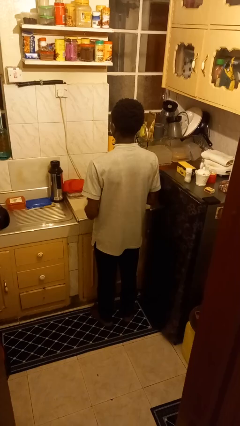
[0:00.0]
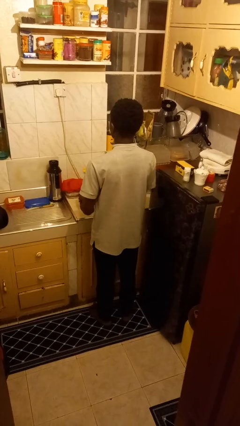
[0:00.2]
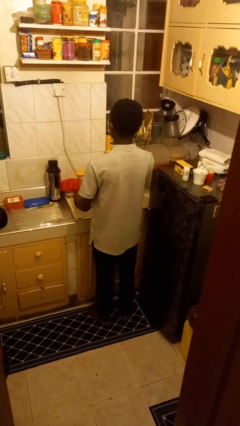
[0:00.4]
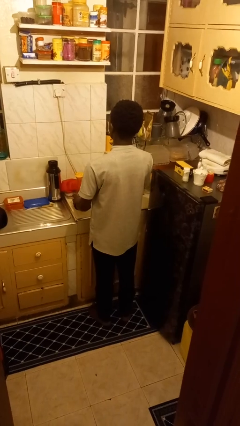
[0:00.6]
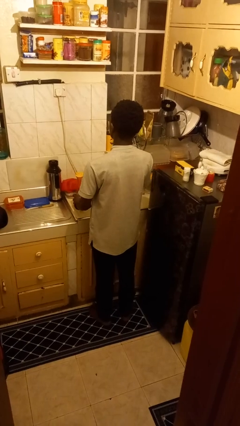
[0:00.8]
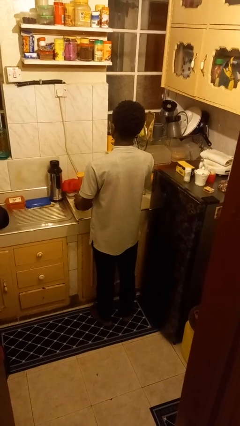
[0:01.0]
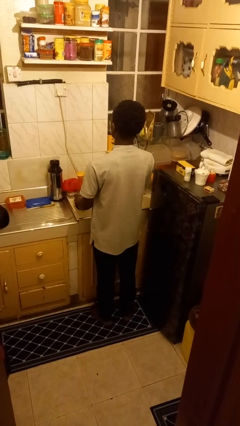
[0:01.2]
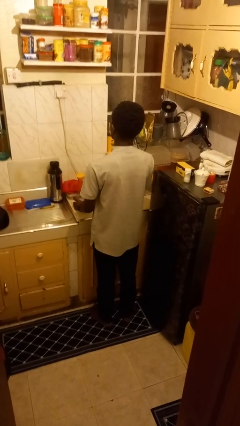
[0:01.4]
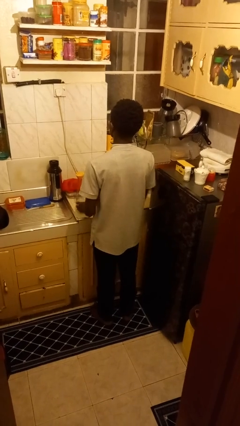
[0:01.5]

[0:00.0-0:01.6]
person puts down object on countertop

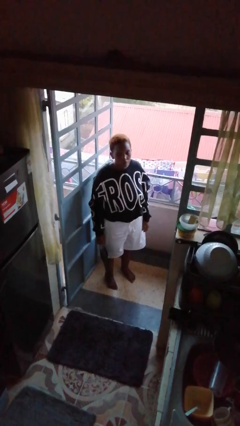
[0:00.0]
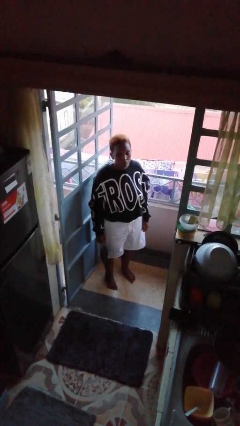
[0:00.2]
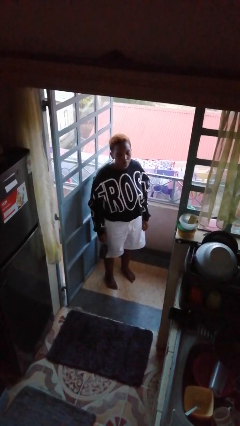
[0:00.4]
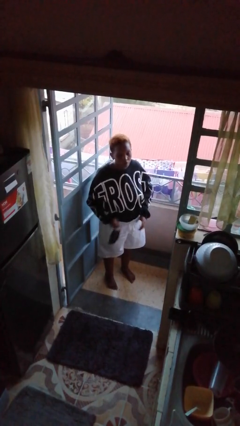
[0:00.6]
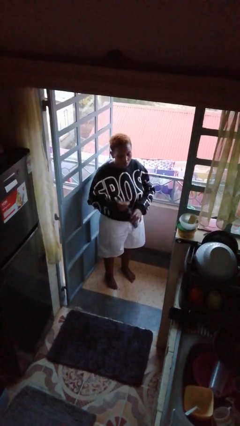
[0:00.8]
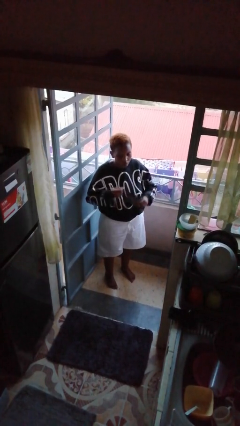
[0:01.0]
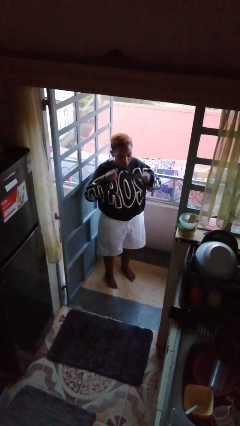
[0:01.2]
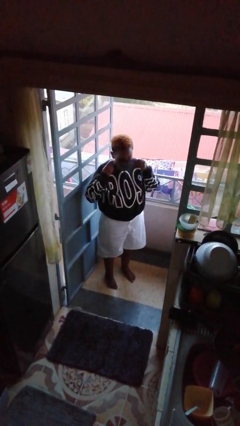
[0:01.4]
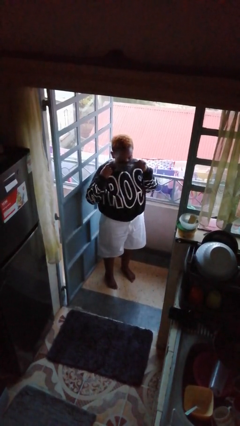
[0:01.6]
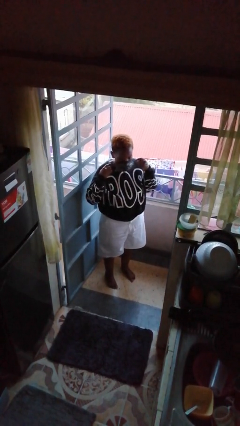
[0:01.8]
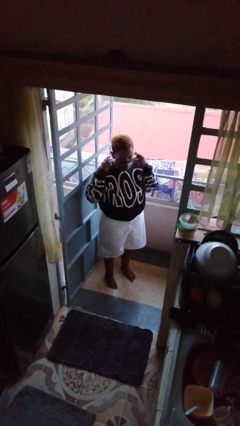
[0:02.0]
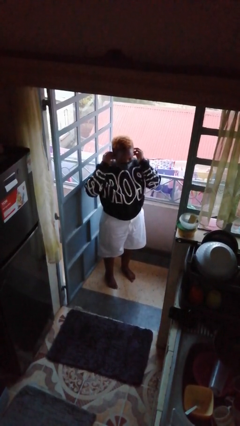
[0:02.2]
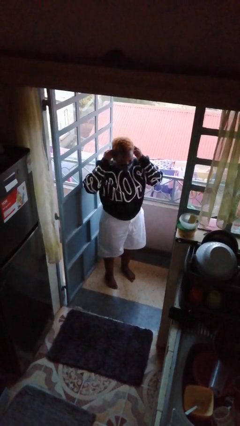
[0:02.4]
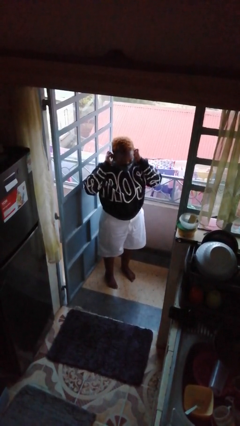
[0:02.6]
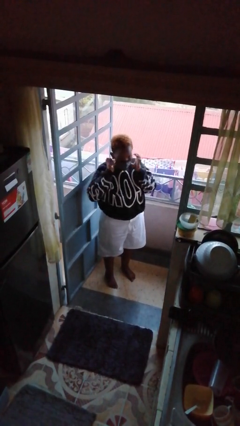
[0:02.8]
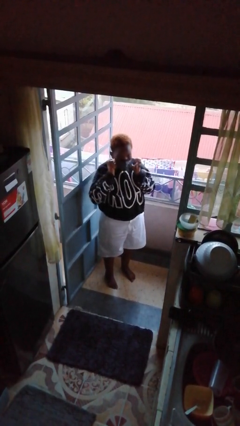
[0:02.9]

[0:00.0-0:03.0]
person puts on facemask

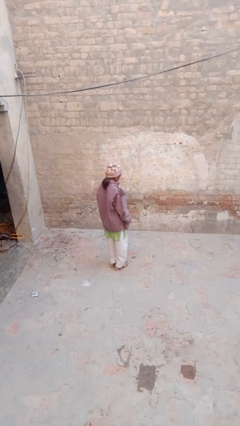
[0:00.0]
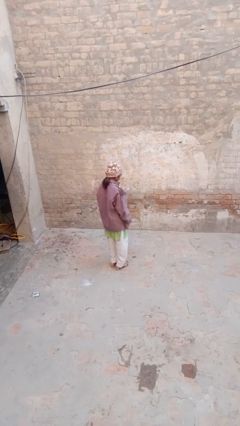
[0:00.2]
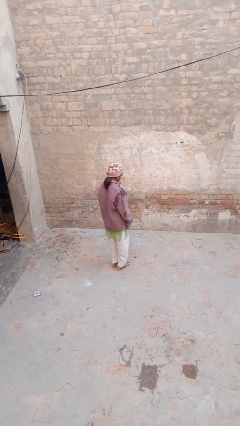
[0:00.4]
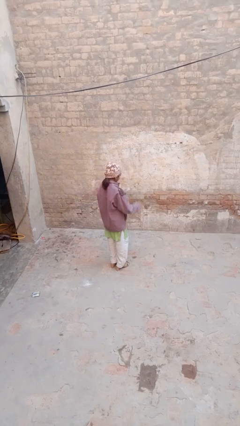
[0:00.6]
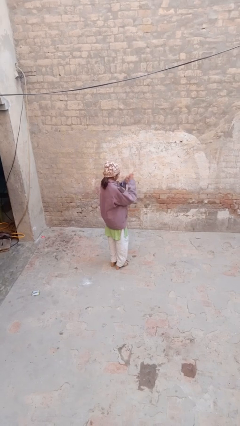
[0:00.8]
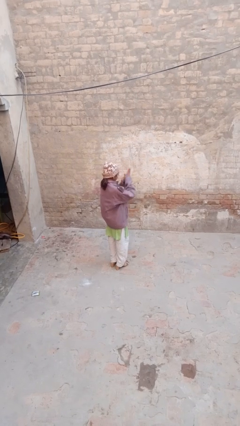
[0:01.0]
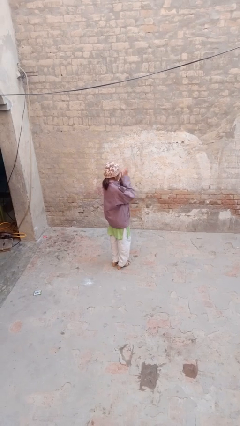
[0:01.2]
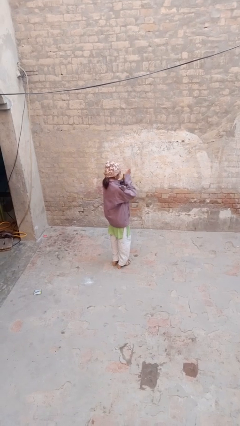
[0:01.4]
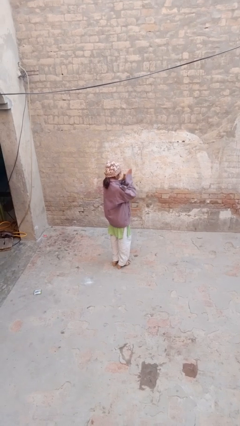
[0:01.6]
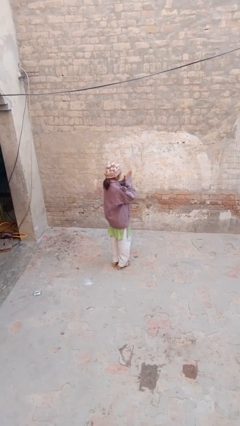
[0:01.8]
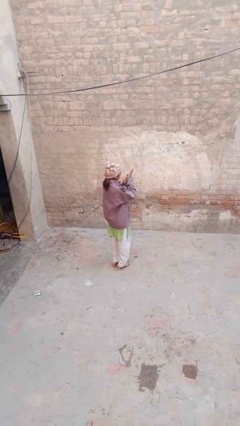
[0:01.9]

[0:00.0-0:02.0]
person blows into hands

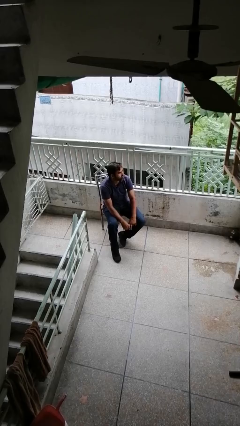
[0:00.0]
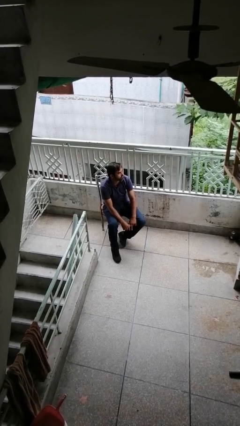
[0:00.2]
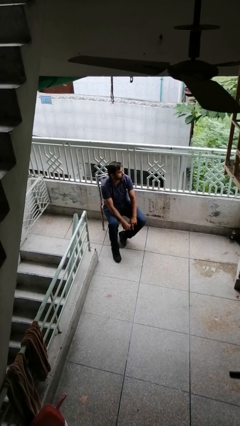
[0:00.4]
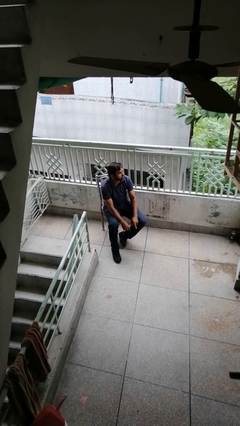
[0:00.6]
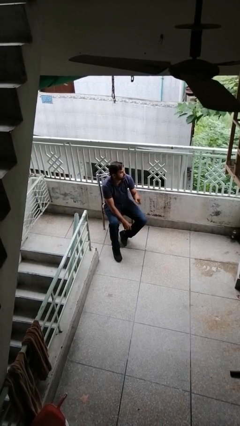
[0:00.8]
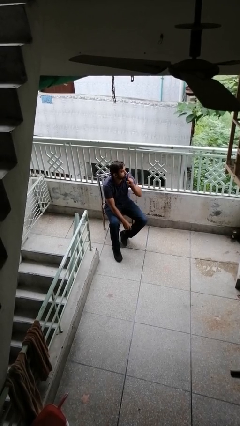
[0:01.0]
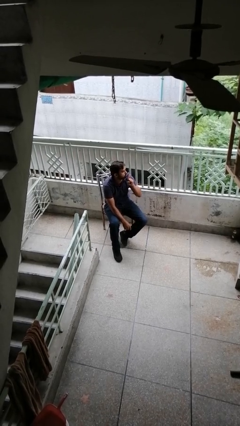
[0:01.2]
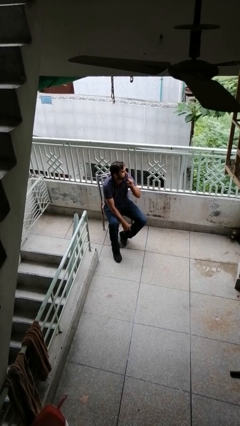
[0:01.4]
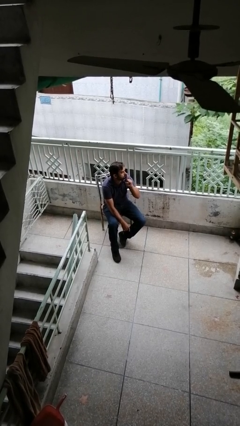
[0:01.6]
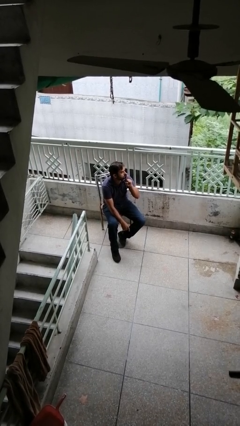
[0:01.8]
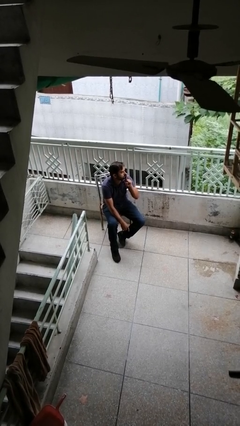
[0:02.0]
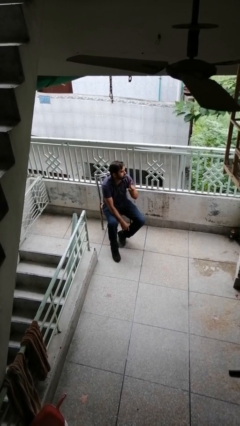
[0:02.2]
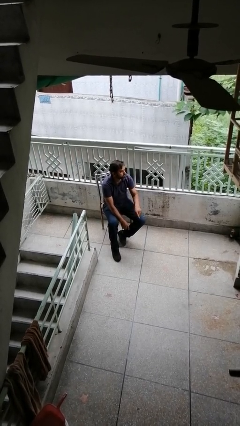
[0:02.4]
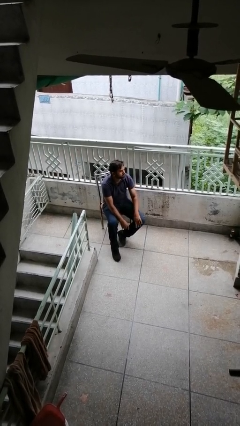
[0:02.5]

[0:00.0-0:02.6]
person gestures be quiet

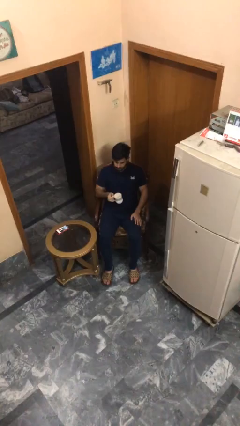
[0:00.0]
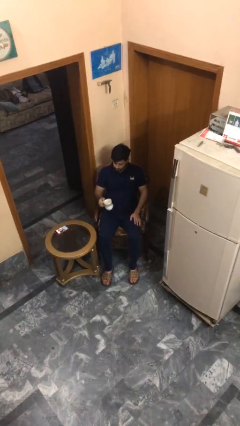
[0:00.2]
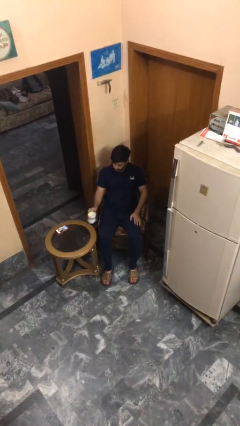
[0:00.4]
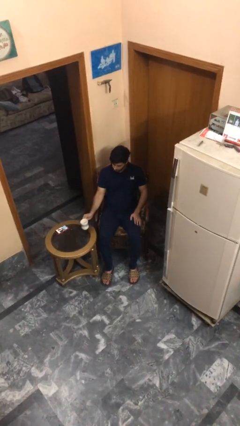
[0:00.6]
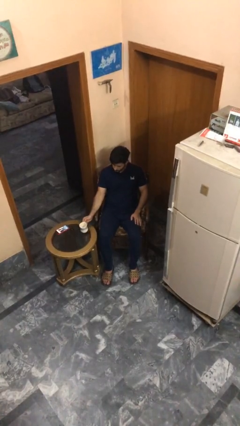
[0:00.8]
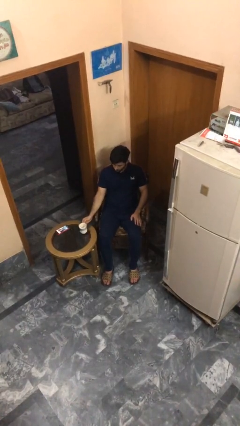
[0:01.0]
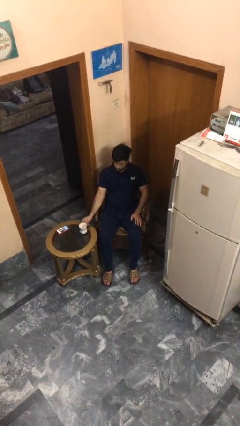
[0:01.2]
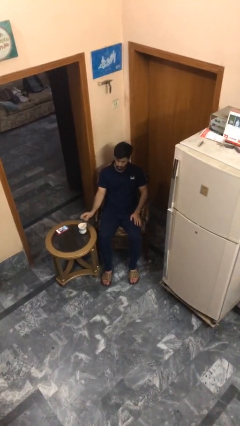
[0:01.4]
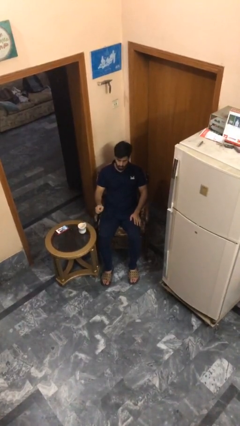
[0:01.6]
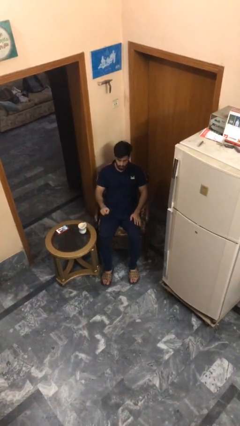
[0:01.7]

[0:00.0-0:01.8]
person puts down object on table

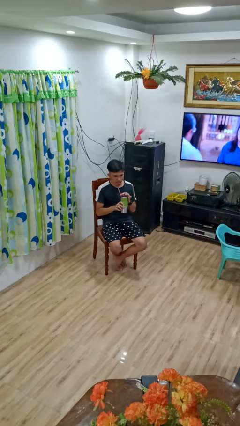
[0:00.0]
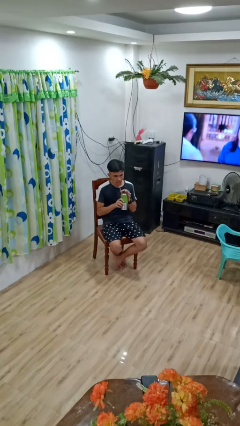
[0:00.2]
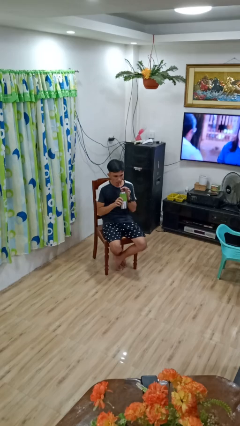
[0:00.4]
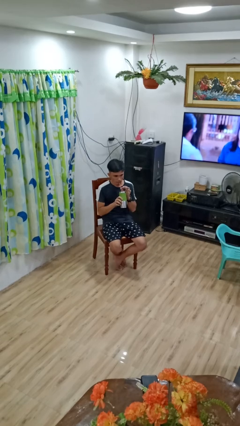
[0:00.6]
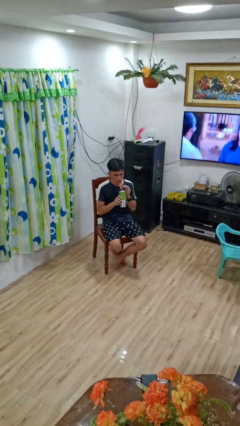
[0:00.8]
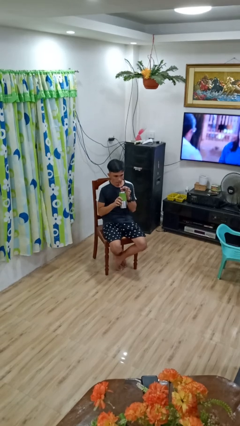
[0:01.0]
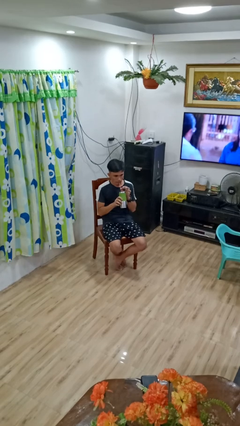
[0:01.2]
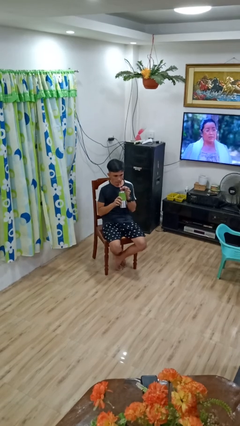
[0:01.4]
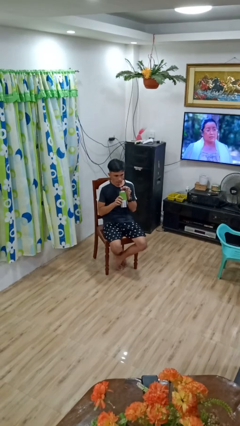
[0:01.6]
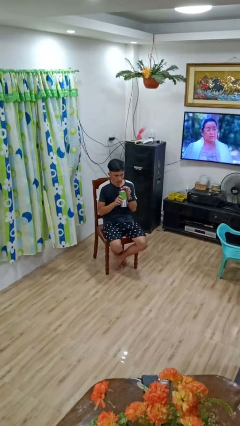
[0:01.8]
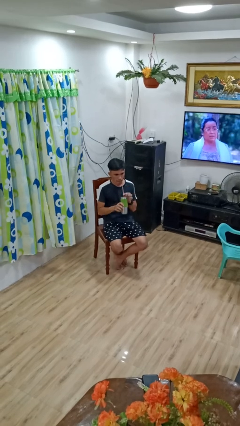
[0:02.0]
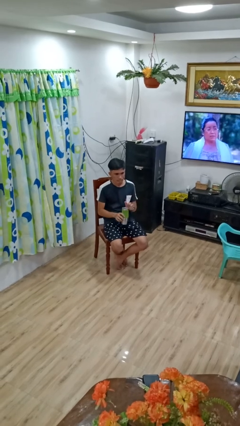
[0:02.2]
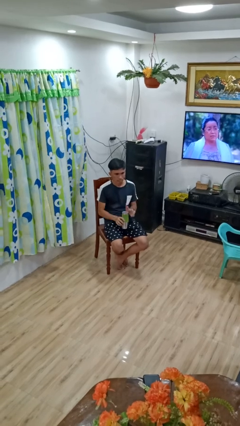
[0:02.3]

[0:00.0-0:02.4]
person drinks from straw

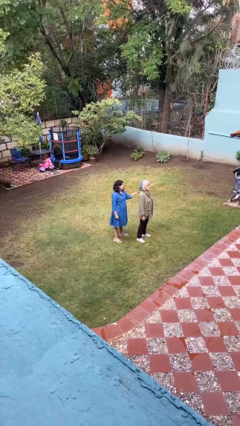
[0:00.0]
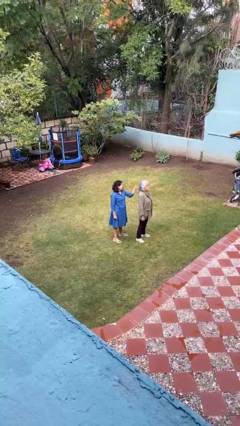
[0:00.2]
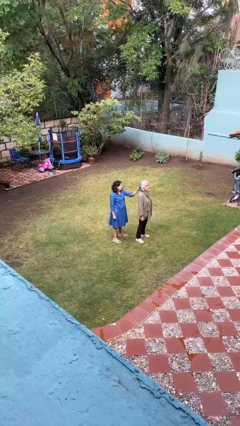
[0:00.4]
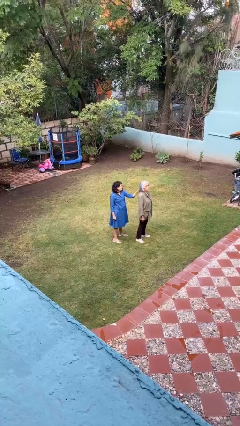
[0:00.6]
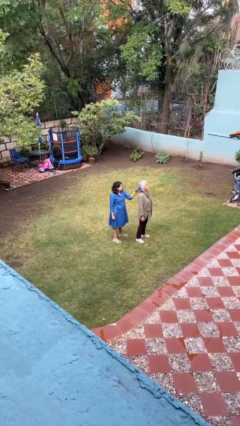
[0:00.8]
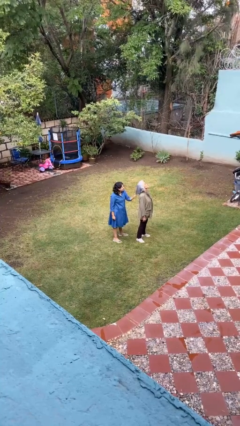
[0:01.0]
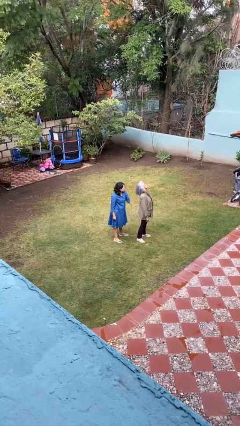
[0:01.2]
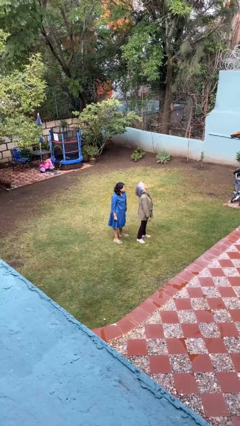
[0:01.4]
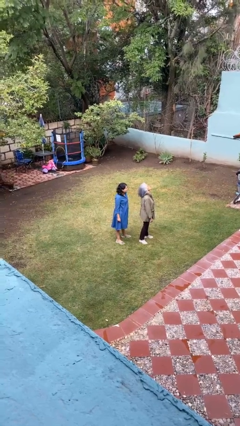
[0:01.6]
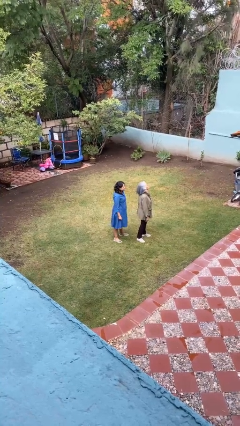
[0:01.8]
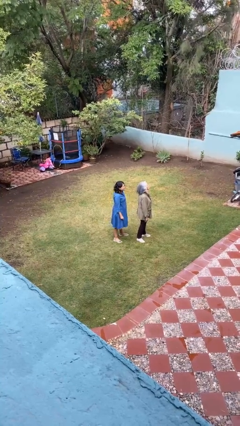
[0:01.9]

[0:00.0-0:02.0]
person grabs person by hair

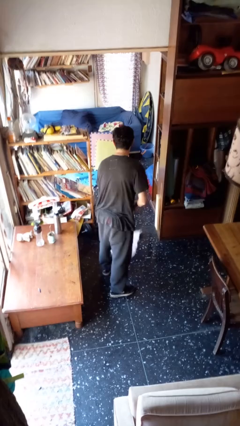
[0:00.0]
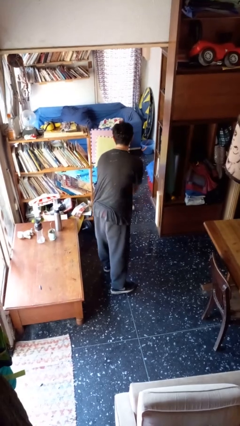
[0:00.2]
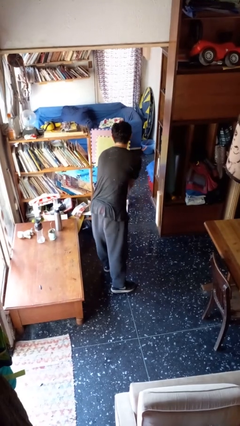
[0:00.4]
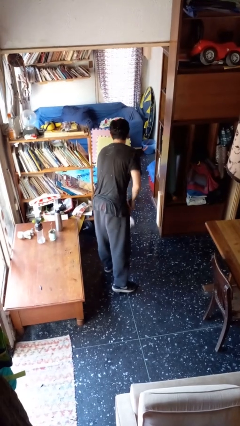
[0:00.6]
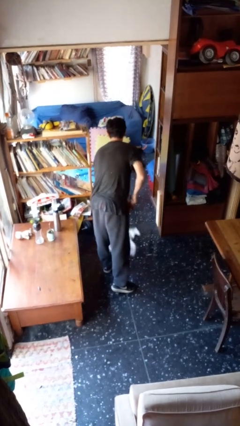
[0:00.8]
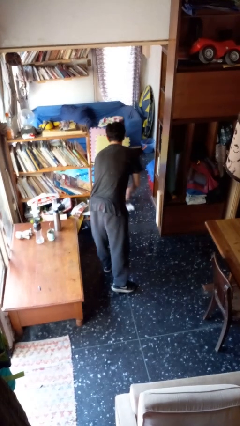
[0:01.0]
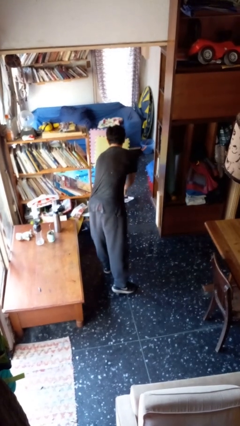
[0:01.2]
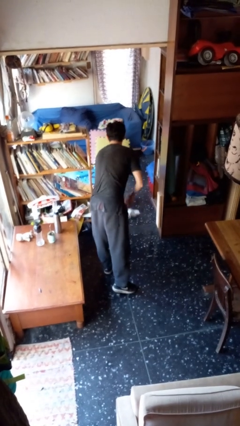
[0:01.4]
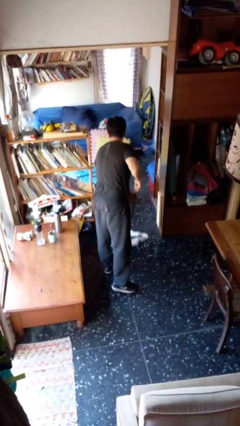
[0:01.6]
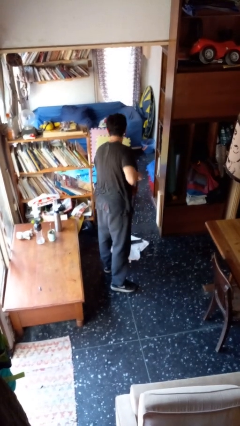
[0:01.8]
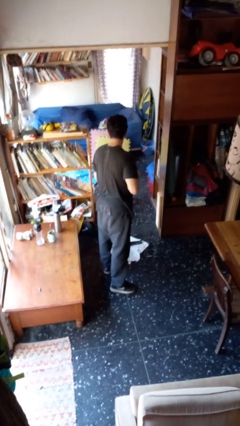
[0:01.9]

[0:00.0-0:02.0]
person mops
